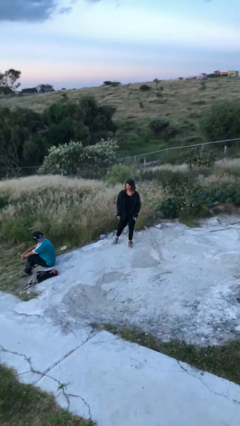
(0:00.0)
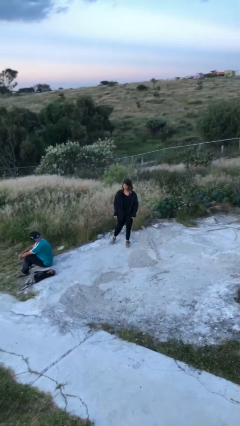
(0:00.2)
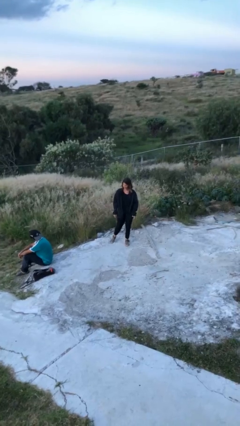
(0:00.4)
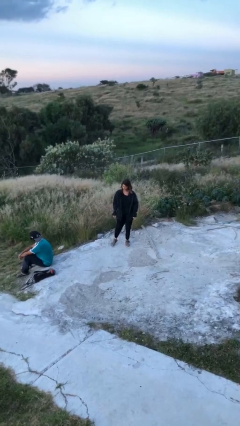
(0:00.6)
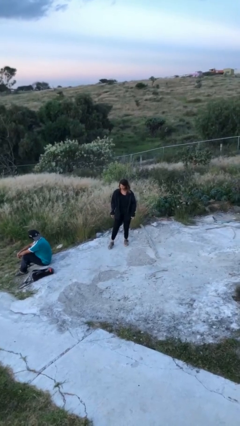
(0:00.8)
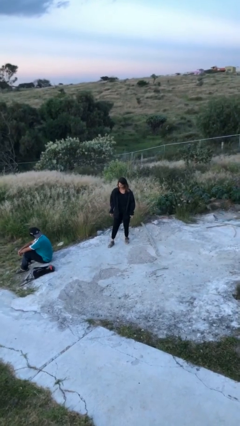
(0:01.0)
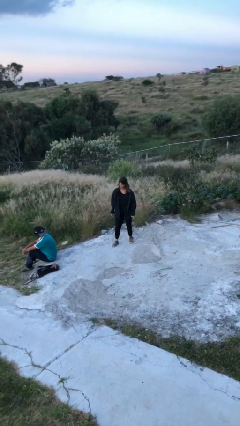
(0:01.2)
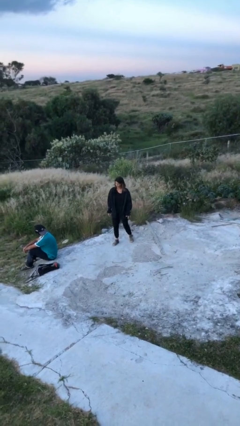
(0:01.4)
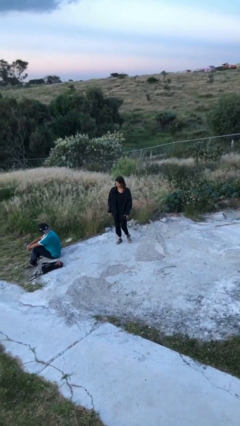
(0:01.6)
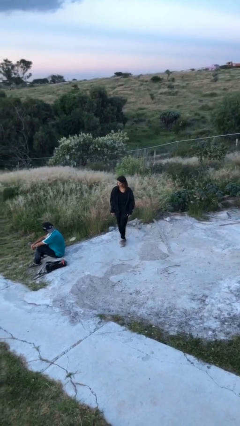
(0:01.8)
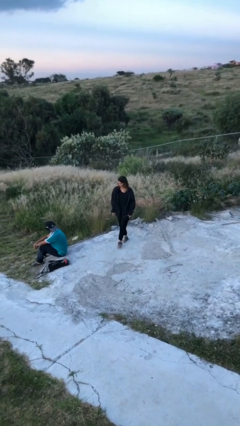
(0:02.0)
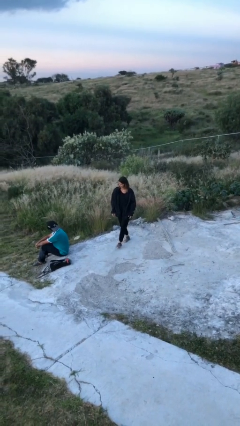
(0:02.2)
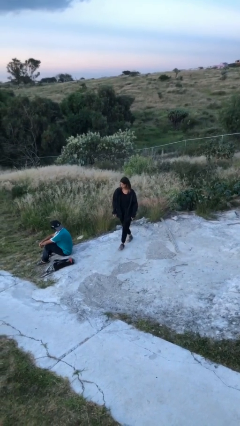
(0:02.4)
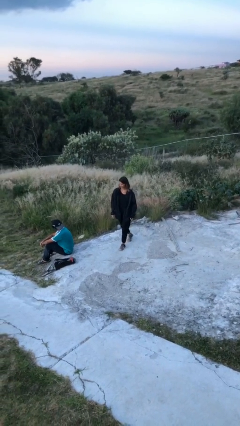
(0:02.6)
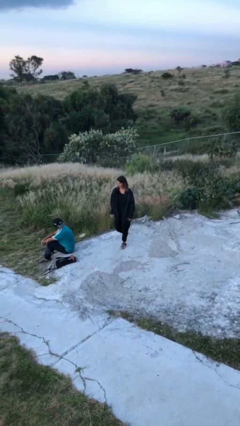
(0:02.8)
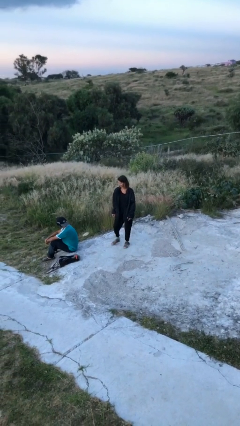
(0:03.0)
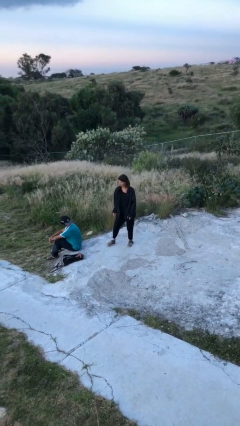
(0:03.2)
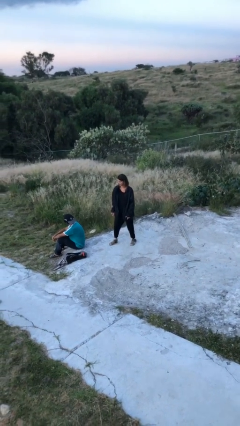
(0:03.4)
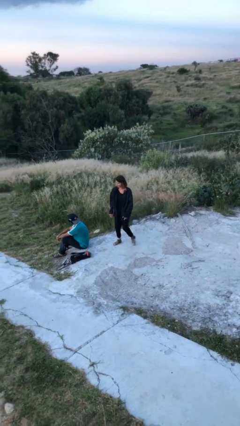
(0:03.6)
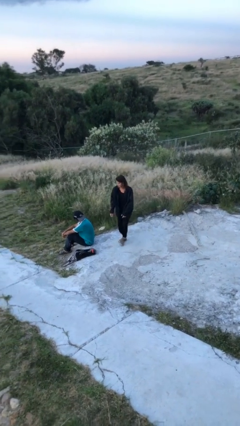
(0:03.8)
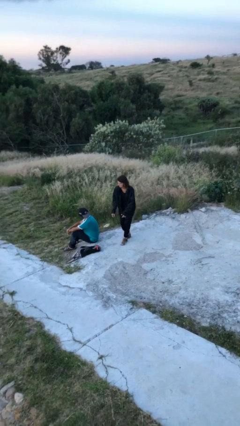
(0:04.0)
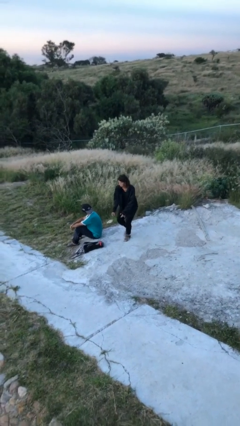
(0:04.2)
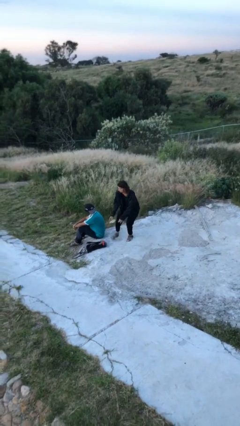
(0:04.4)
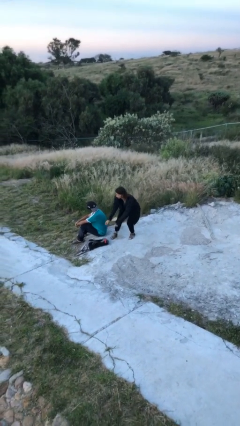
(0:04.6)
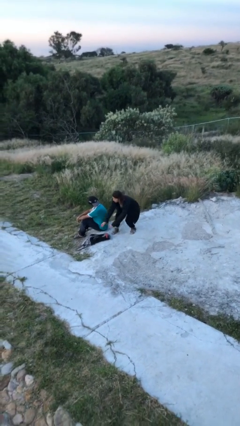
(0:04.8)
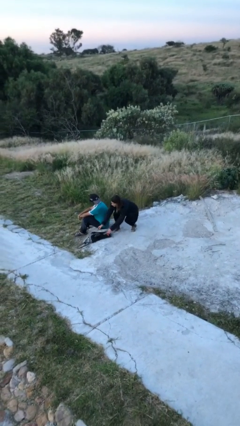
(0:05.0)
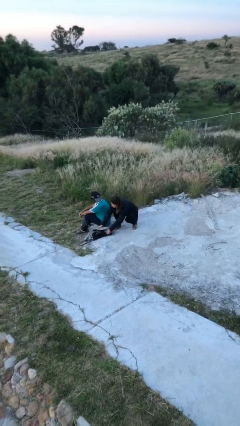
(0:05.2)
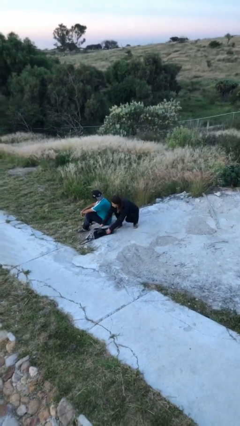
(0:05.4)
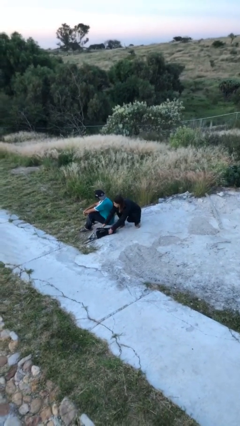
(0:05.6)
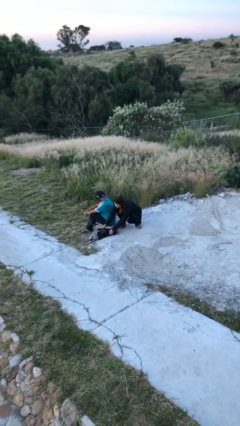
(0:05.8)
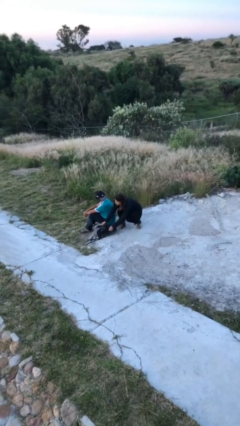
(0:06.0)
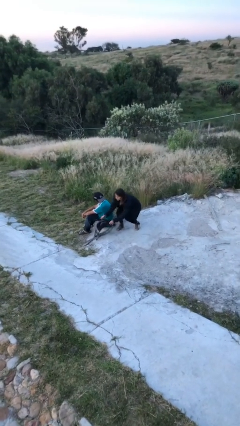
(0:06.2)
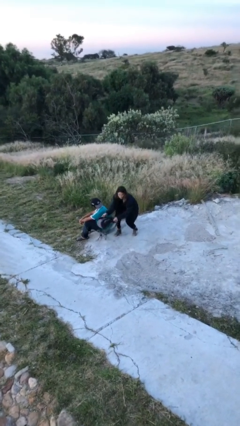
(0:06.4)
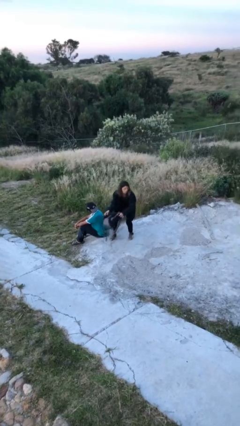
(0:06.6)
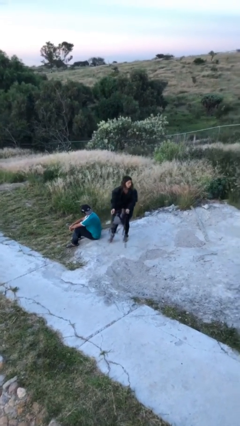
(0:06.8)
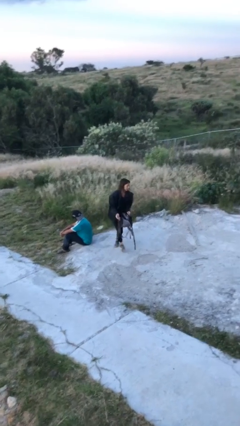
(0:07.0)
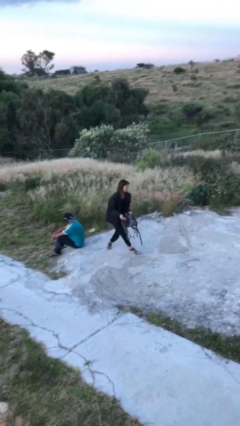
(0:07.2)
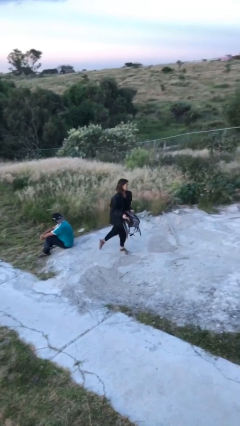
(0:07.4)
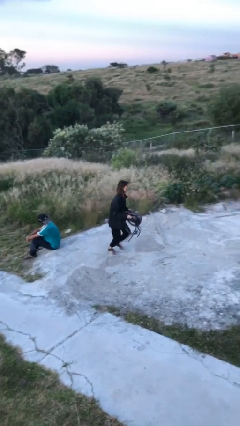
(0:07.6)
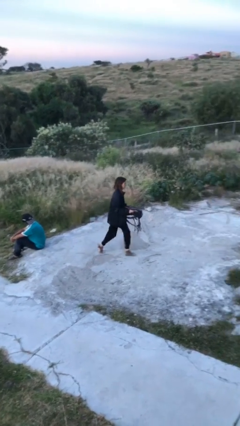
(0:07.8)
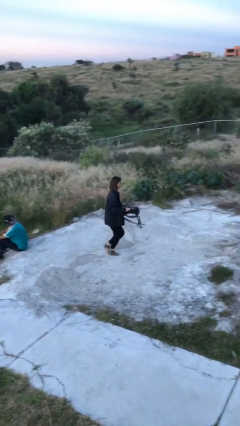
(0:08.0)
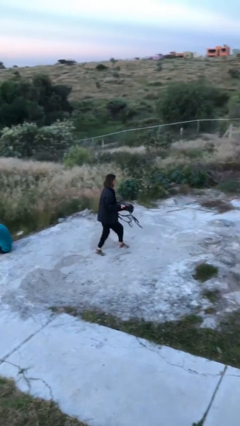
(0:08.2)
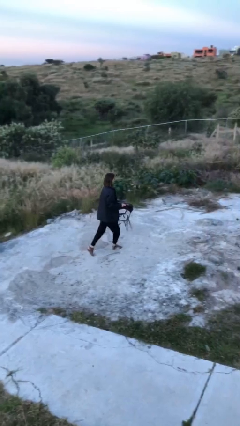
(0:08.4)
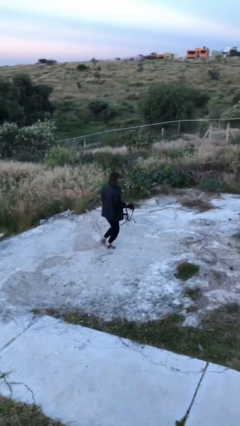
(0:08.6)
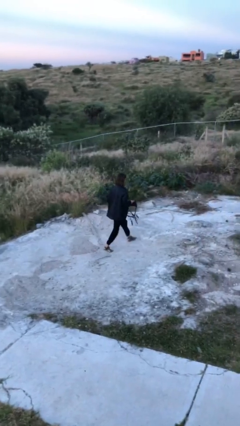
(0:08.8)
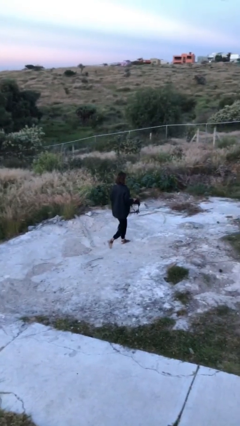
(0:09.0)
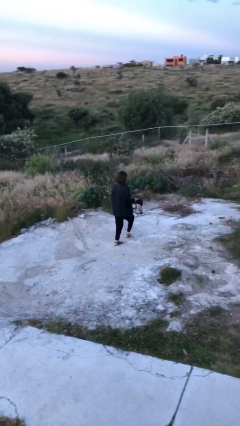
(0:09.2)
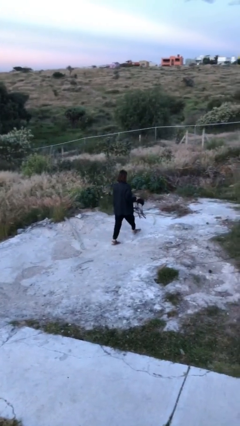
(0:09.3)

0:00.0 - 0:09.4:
person steals object from person

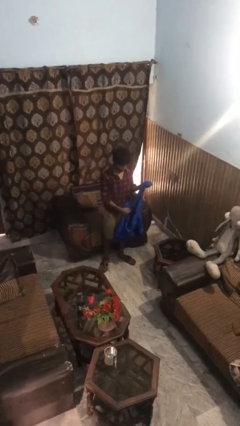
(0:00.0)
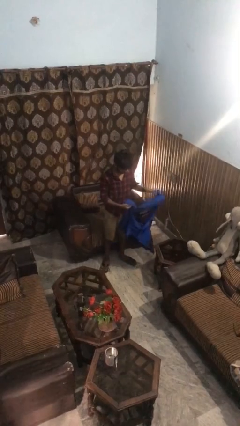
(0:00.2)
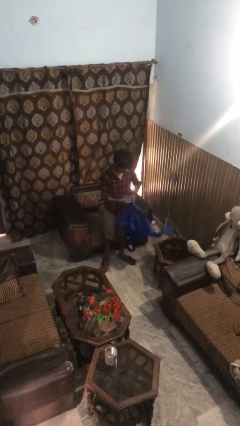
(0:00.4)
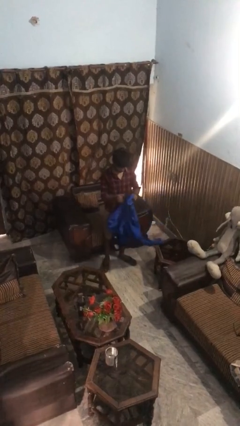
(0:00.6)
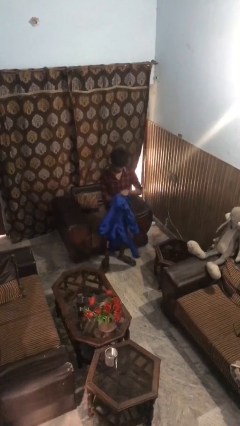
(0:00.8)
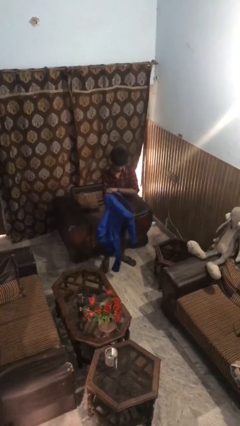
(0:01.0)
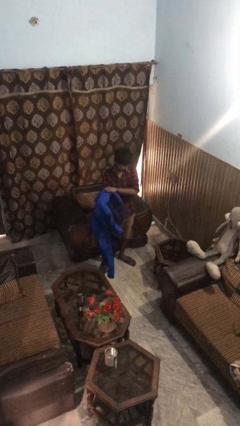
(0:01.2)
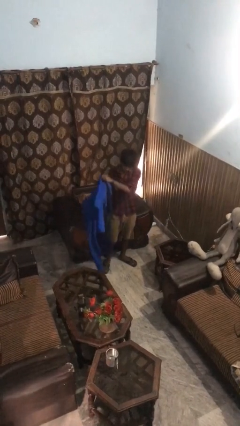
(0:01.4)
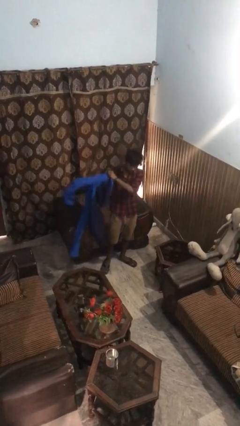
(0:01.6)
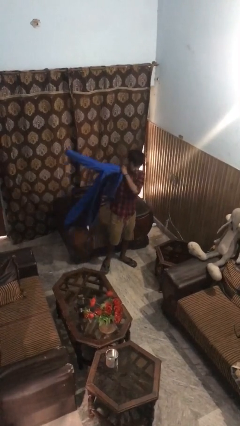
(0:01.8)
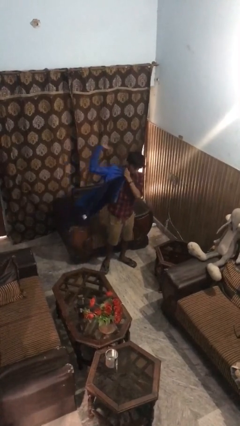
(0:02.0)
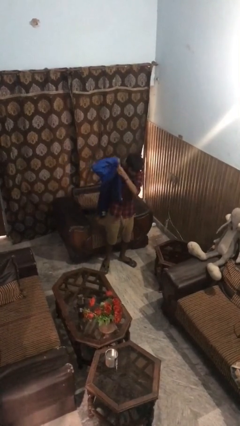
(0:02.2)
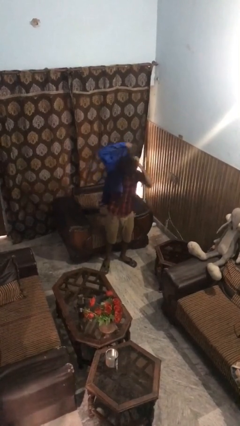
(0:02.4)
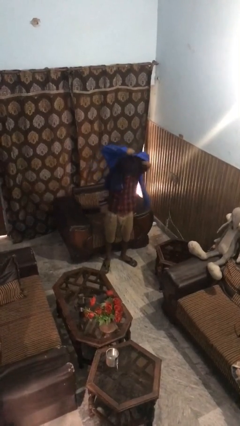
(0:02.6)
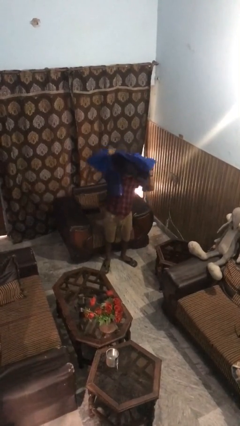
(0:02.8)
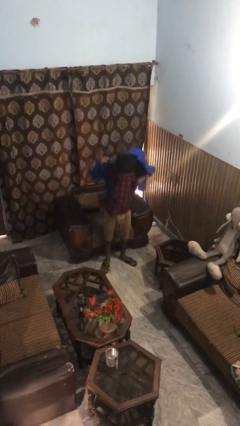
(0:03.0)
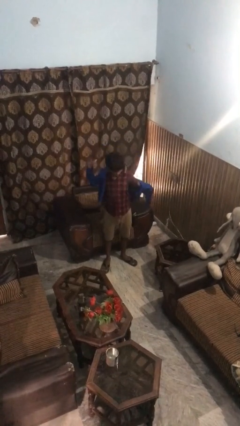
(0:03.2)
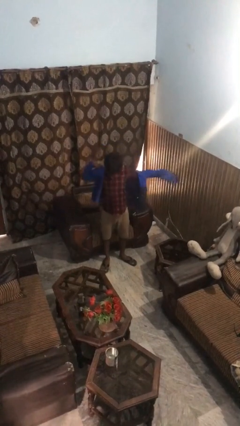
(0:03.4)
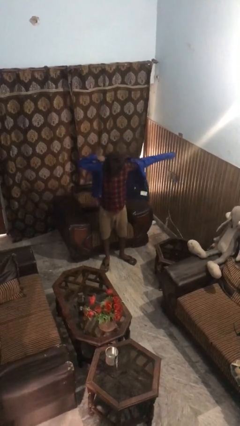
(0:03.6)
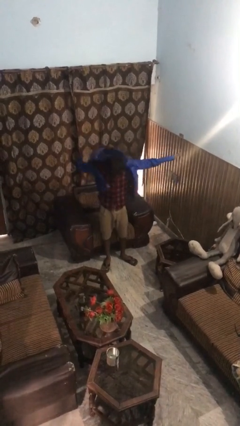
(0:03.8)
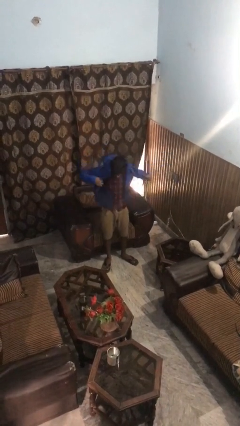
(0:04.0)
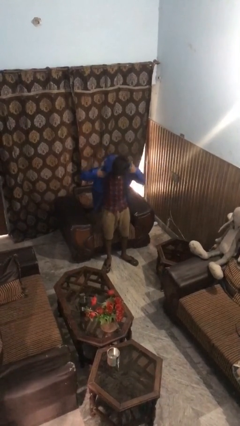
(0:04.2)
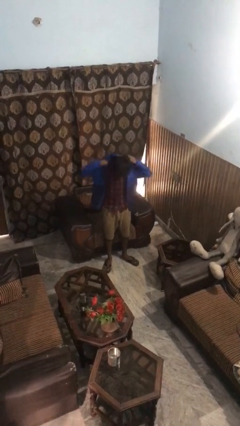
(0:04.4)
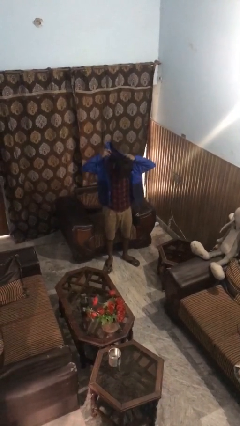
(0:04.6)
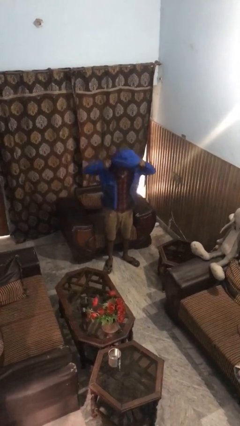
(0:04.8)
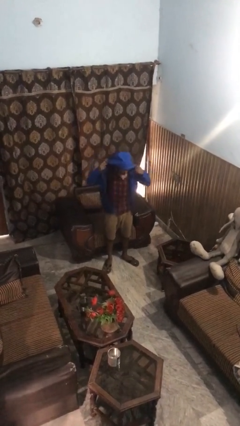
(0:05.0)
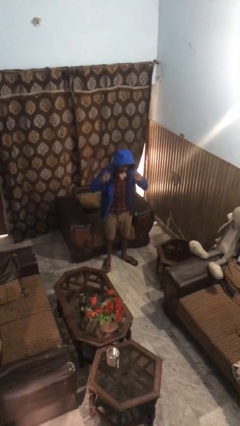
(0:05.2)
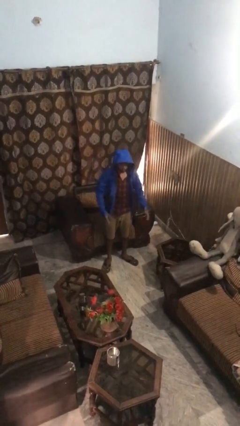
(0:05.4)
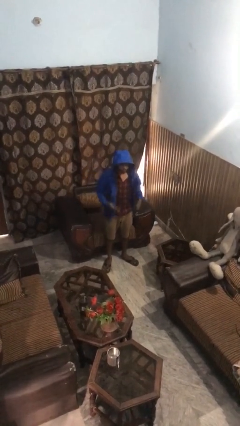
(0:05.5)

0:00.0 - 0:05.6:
person puts on hoodie

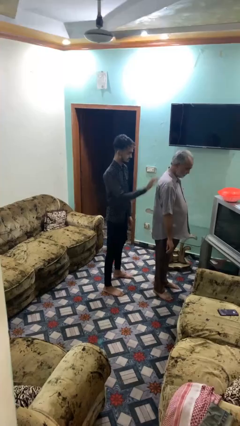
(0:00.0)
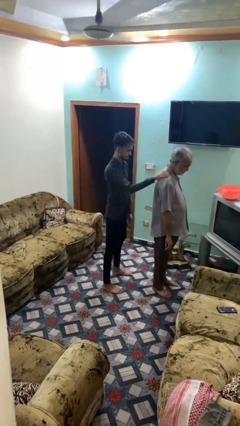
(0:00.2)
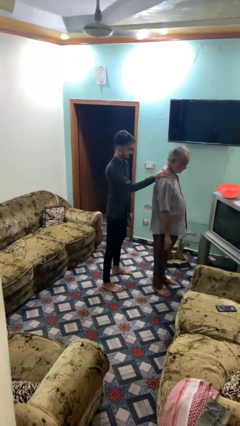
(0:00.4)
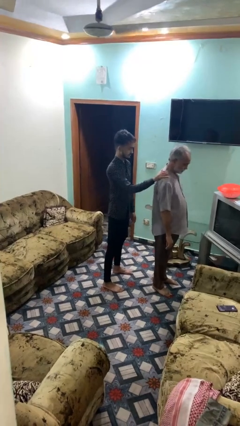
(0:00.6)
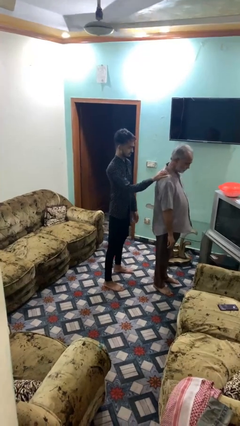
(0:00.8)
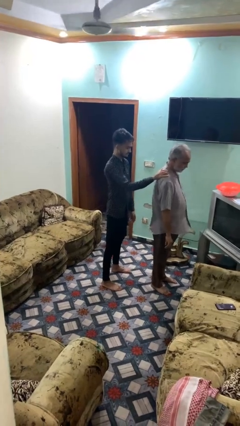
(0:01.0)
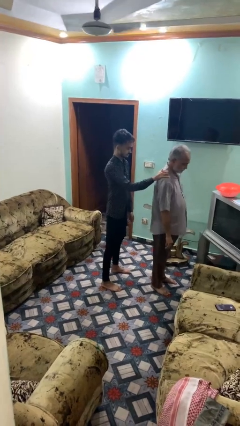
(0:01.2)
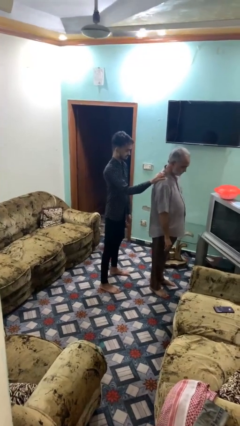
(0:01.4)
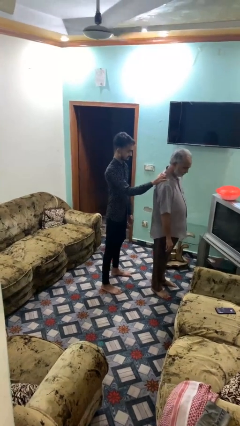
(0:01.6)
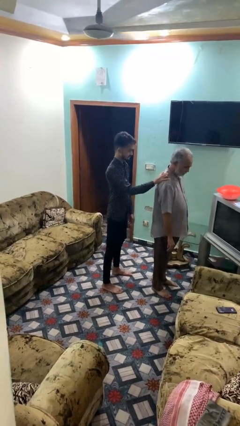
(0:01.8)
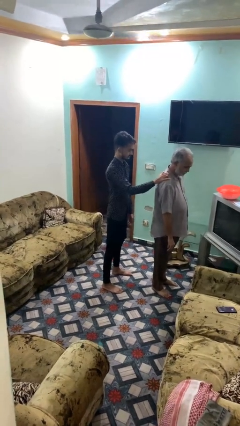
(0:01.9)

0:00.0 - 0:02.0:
person grabs person by shoulder

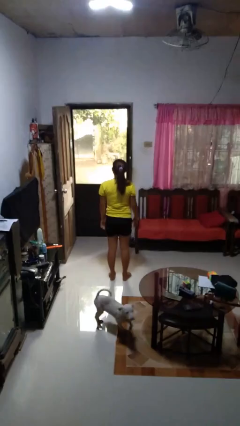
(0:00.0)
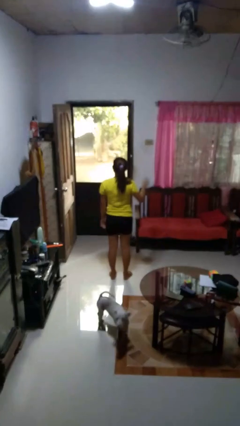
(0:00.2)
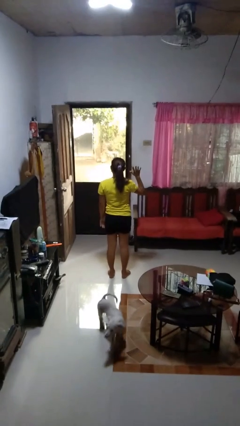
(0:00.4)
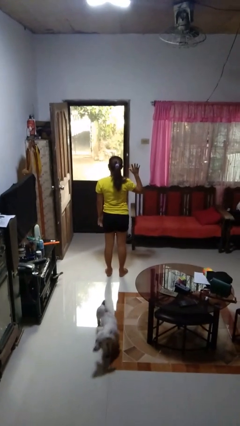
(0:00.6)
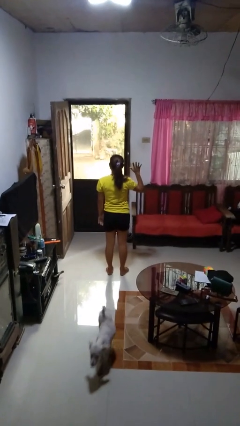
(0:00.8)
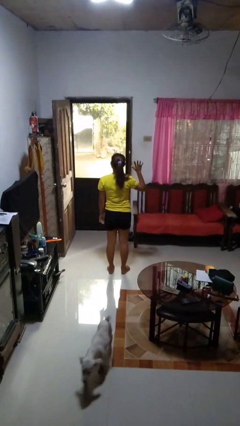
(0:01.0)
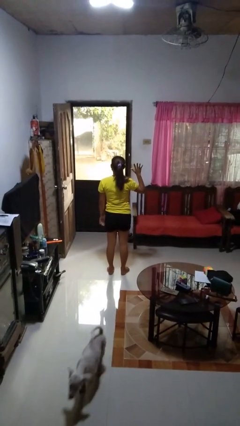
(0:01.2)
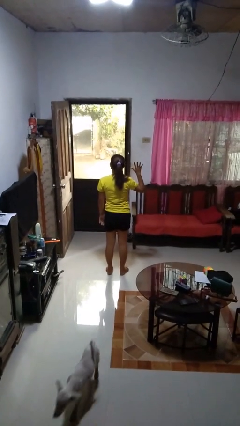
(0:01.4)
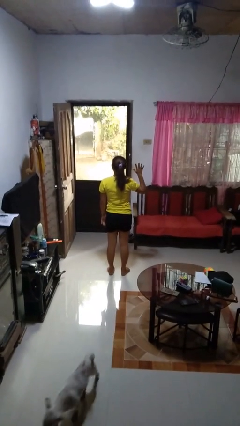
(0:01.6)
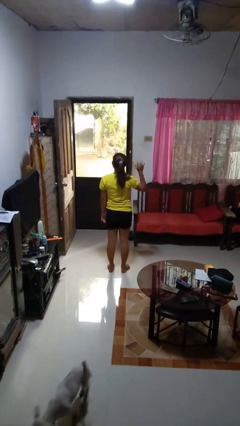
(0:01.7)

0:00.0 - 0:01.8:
person gestures number five
